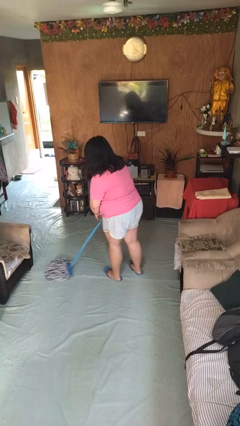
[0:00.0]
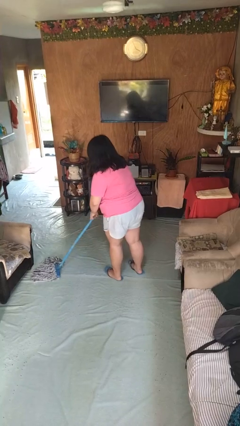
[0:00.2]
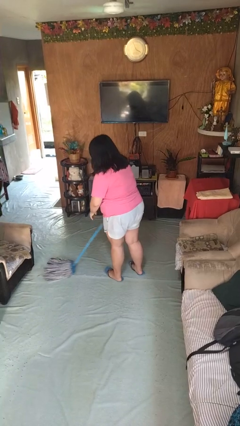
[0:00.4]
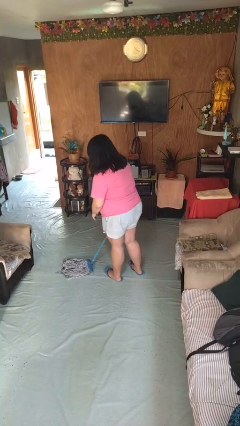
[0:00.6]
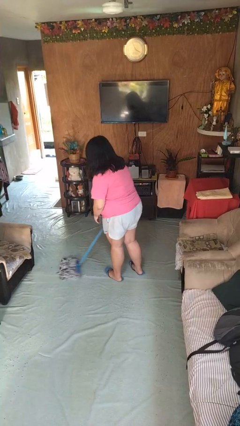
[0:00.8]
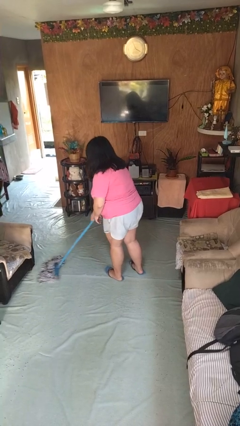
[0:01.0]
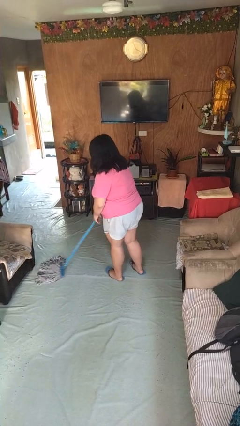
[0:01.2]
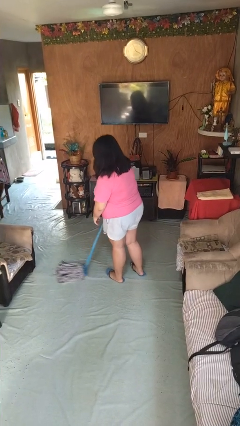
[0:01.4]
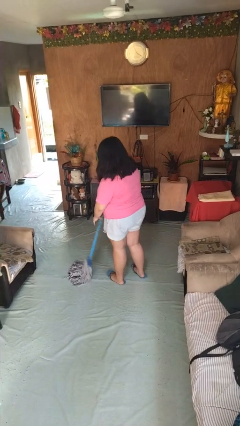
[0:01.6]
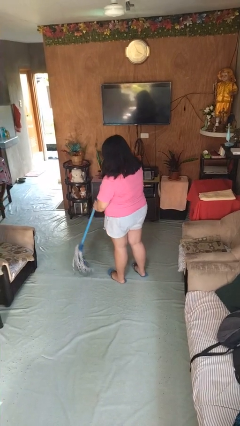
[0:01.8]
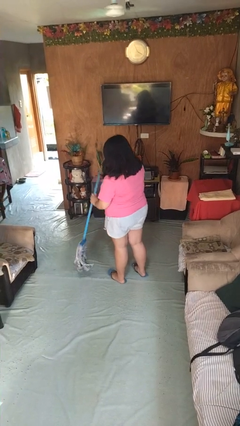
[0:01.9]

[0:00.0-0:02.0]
person mops

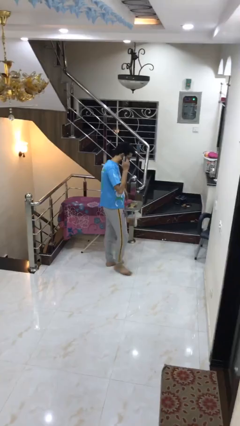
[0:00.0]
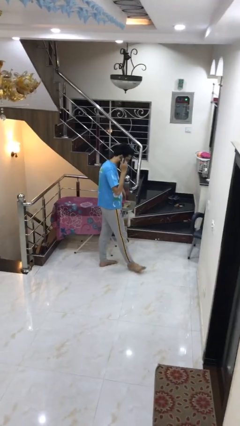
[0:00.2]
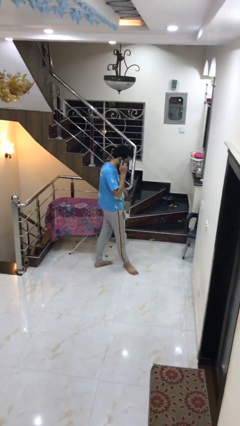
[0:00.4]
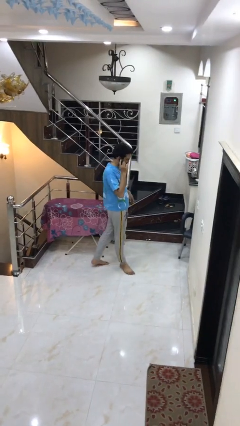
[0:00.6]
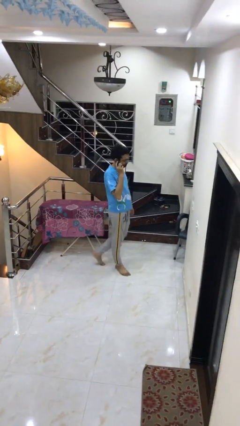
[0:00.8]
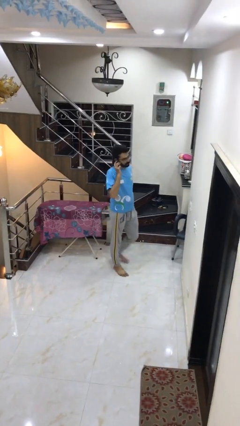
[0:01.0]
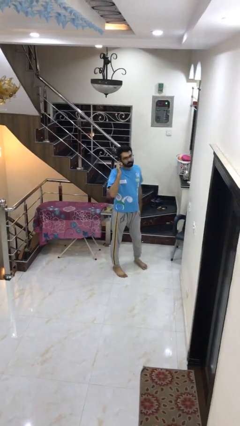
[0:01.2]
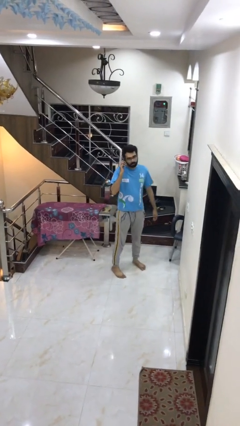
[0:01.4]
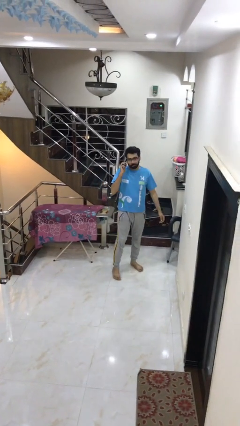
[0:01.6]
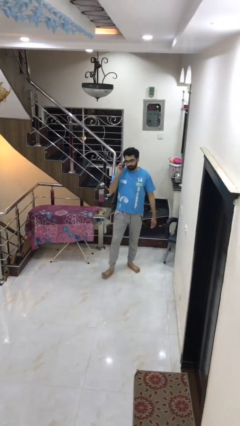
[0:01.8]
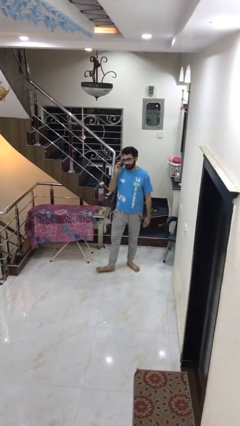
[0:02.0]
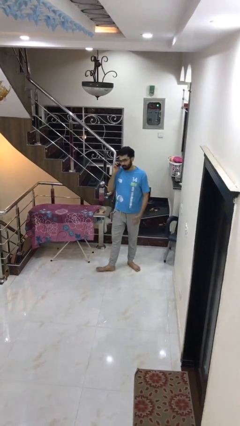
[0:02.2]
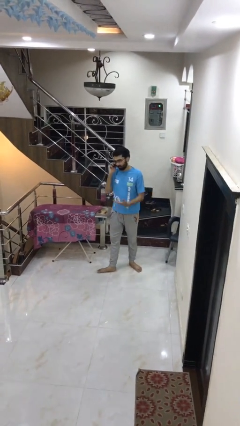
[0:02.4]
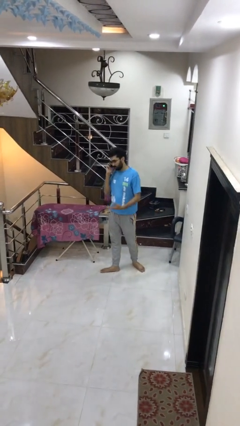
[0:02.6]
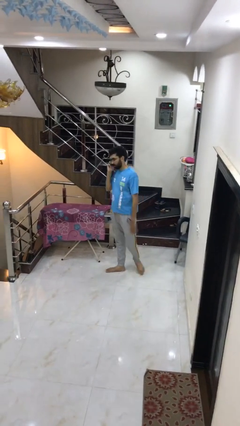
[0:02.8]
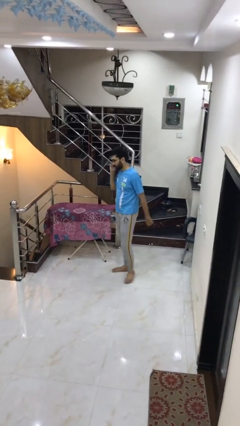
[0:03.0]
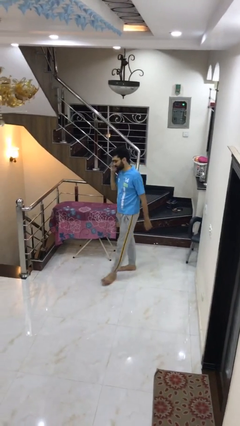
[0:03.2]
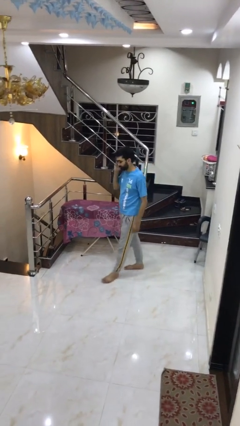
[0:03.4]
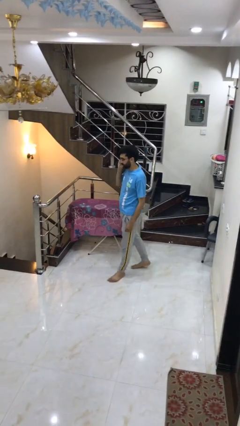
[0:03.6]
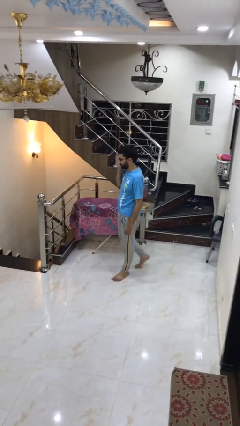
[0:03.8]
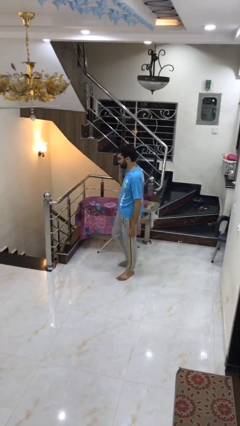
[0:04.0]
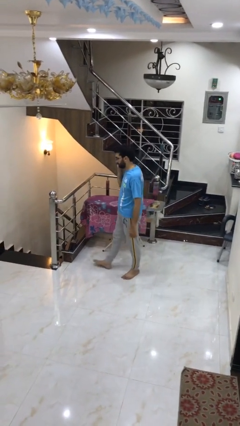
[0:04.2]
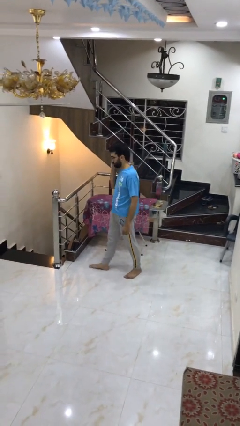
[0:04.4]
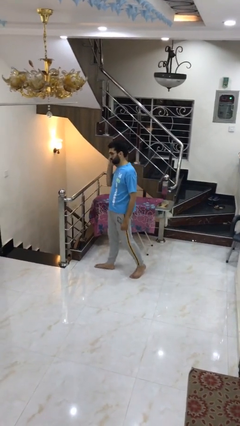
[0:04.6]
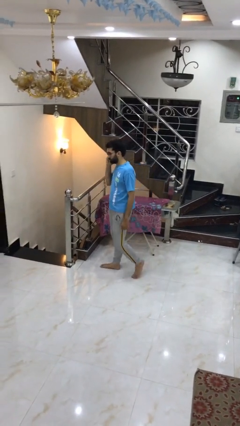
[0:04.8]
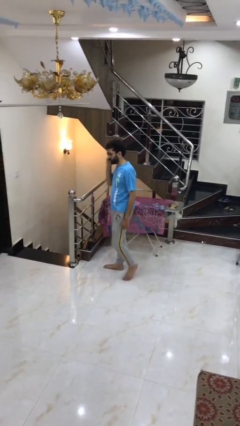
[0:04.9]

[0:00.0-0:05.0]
person talks on phone

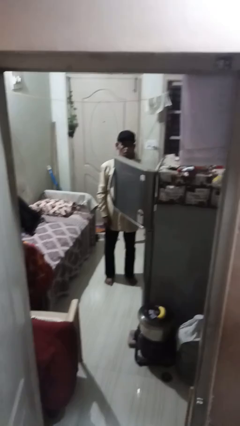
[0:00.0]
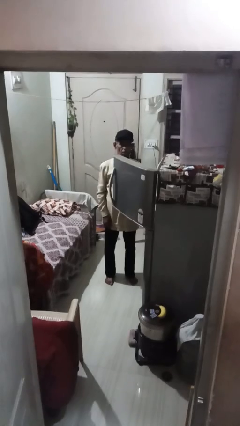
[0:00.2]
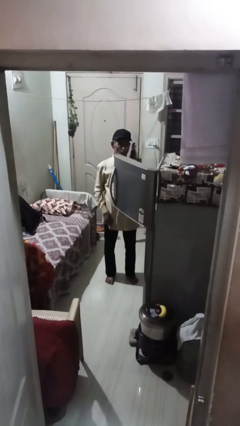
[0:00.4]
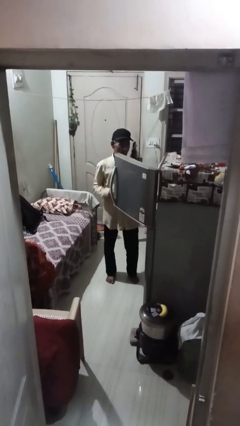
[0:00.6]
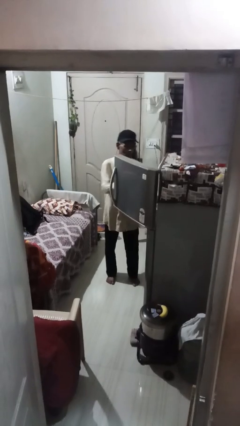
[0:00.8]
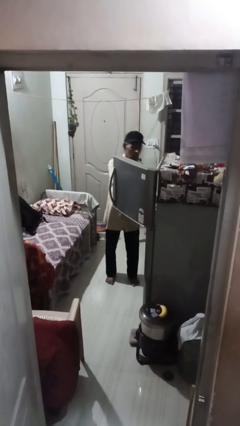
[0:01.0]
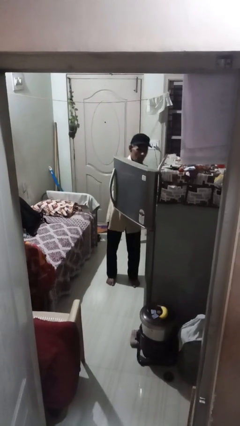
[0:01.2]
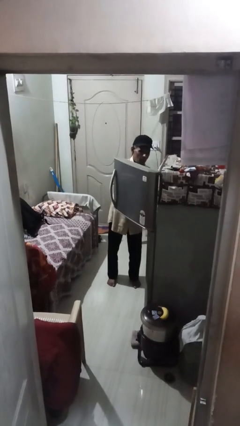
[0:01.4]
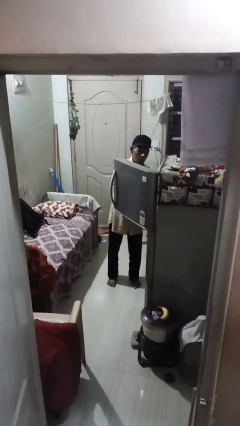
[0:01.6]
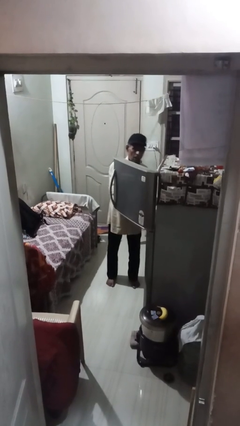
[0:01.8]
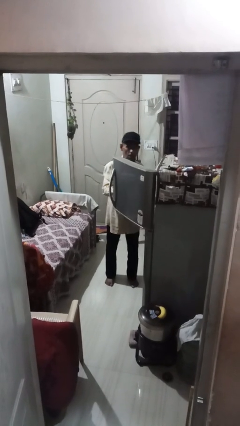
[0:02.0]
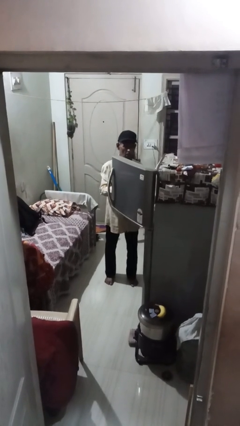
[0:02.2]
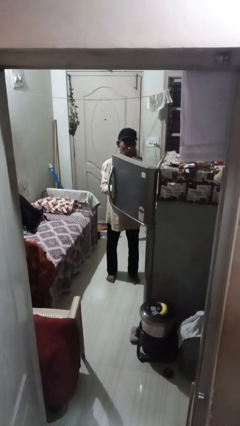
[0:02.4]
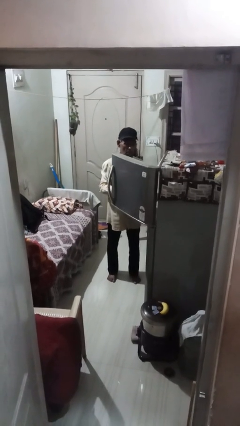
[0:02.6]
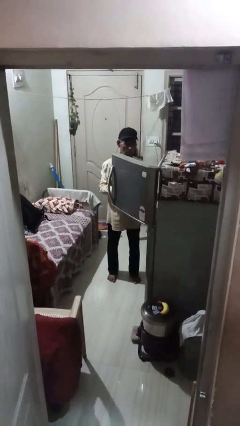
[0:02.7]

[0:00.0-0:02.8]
person takes object from refrigerator

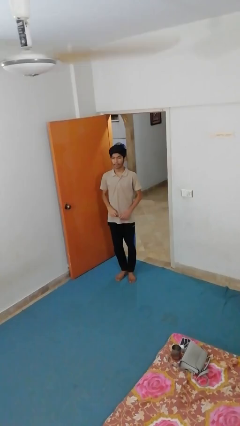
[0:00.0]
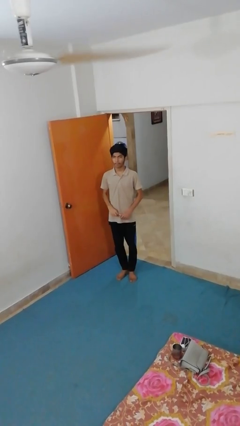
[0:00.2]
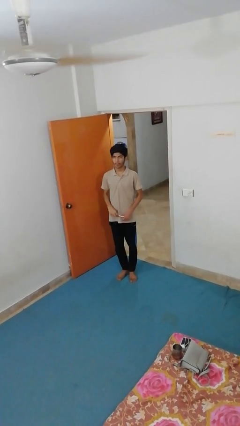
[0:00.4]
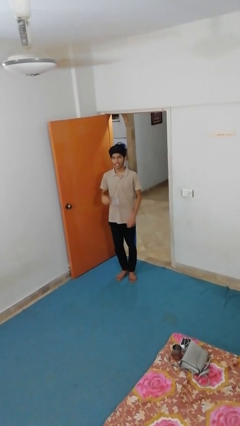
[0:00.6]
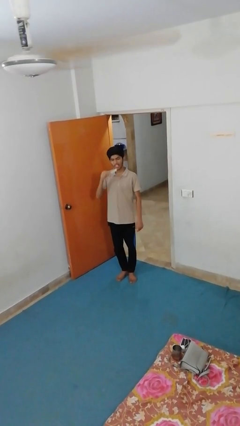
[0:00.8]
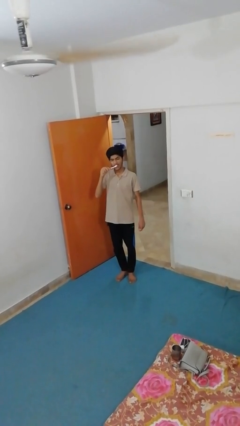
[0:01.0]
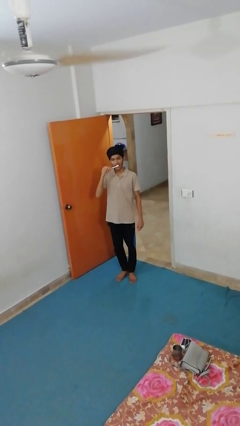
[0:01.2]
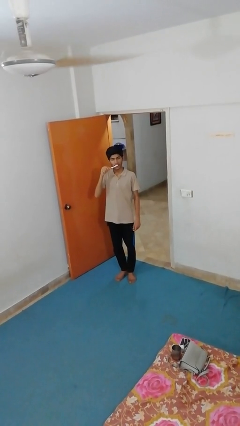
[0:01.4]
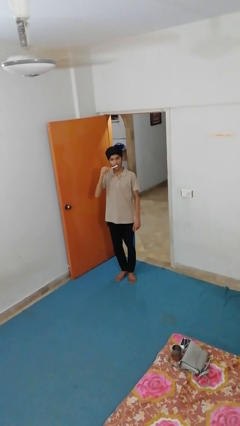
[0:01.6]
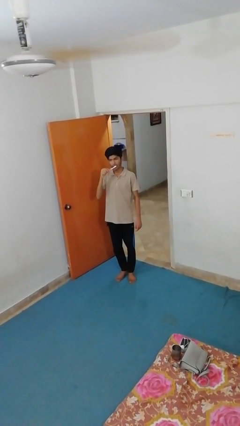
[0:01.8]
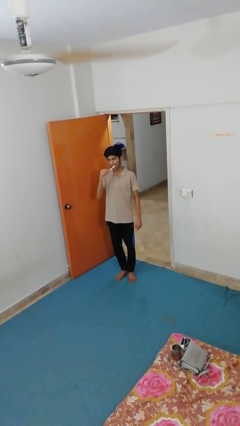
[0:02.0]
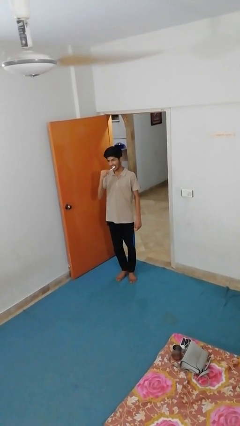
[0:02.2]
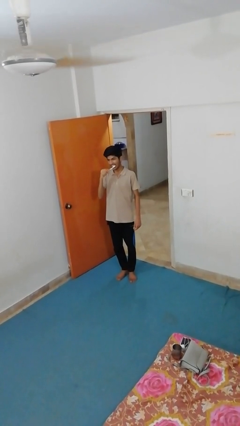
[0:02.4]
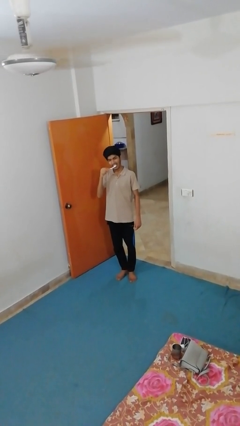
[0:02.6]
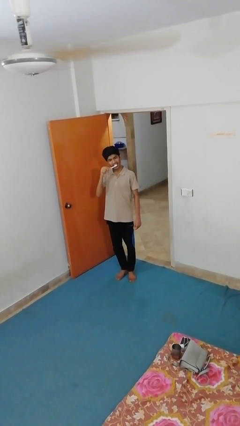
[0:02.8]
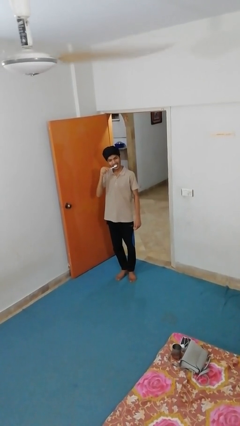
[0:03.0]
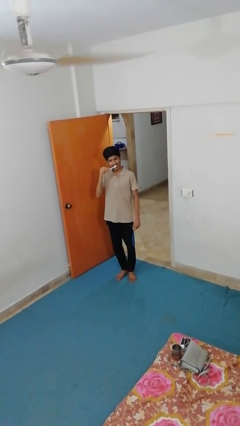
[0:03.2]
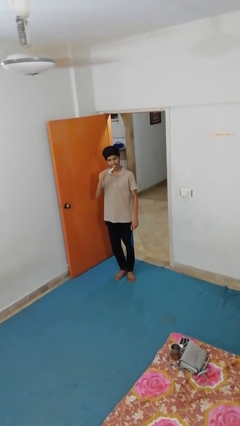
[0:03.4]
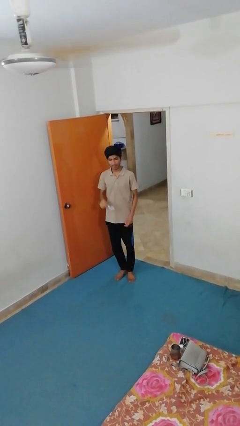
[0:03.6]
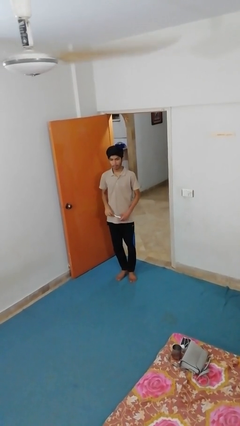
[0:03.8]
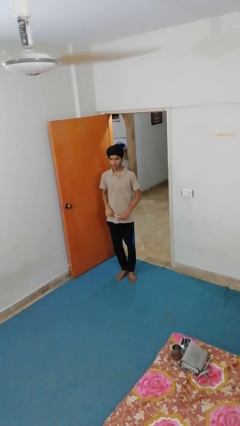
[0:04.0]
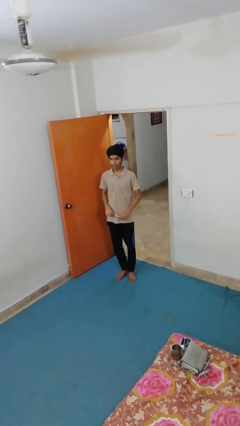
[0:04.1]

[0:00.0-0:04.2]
person brushes teeth

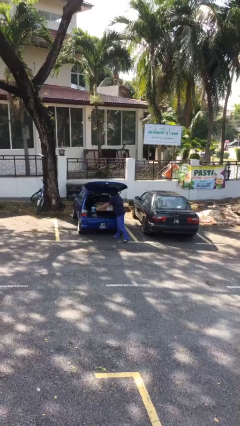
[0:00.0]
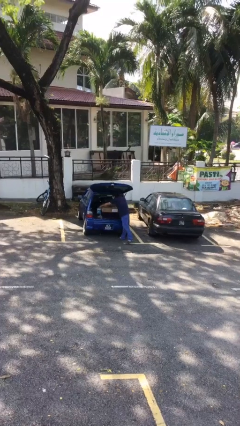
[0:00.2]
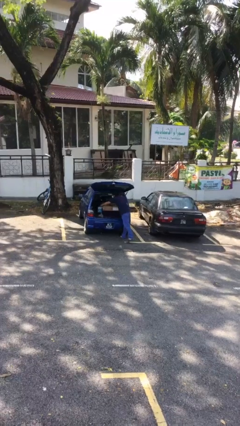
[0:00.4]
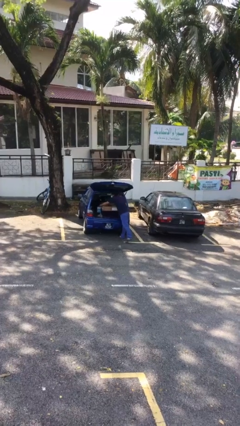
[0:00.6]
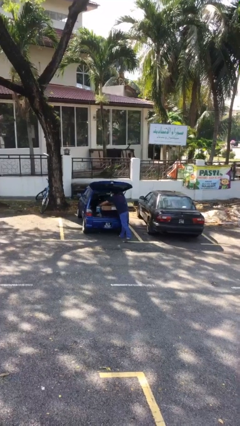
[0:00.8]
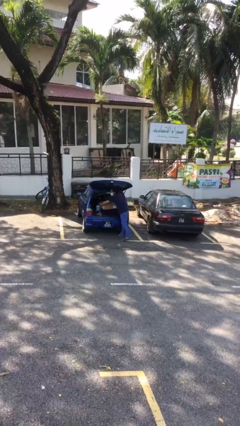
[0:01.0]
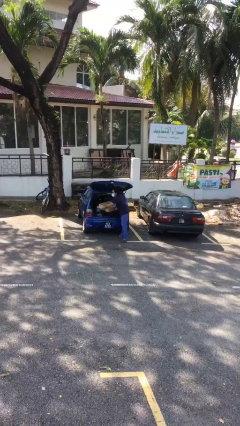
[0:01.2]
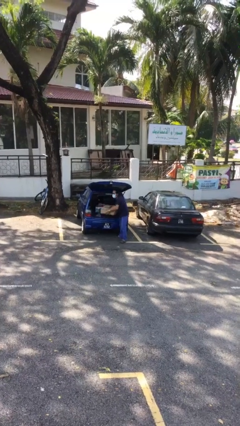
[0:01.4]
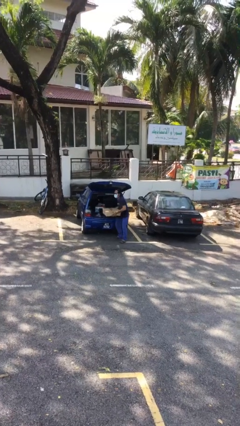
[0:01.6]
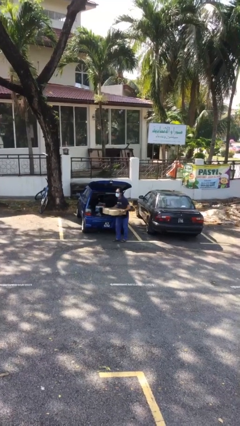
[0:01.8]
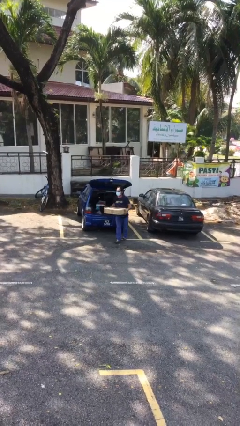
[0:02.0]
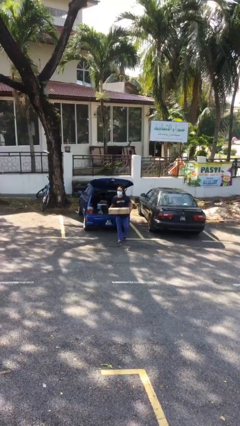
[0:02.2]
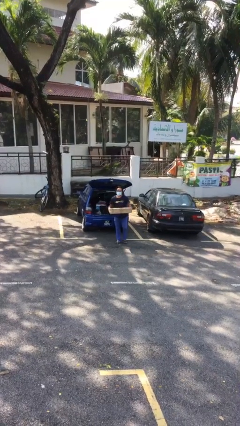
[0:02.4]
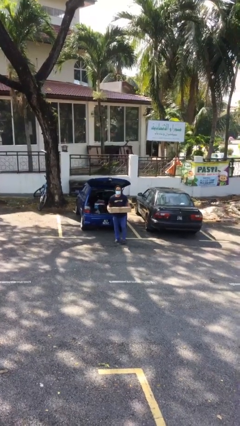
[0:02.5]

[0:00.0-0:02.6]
person unloads car

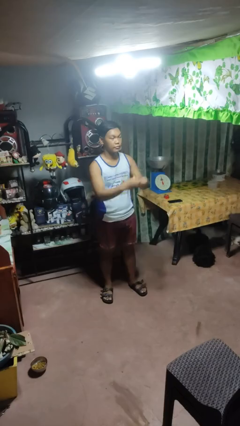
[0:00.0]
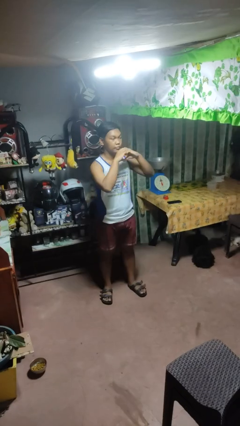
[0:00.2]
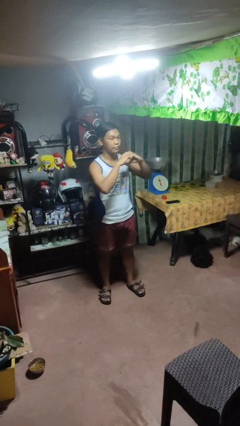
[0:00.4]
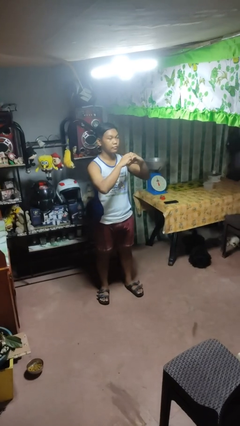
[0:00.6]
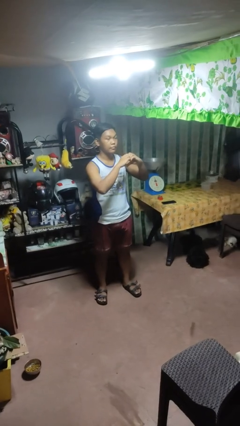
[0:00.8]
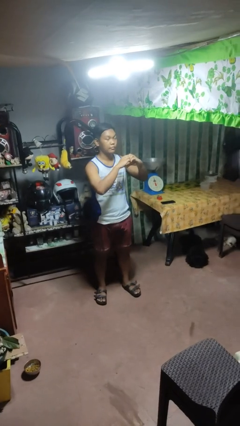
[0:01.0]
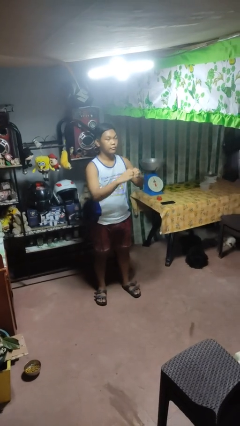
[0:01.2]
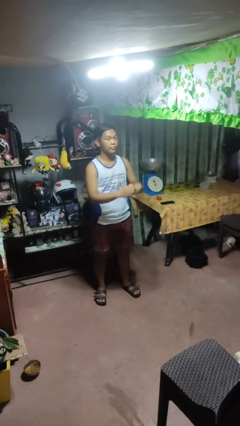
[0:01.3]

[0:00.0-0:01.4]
person gestures heart
